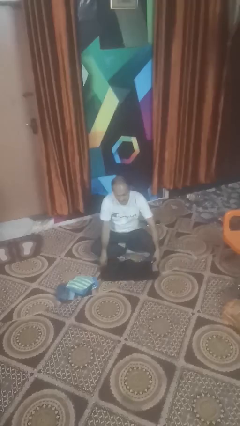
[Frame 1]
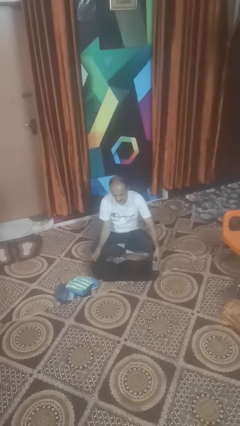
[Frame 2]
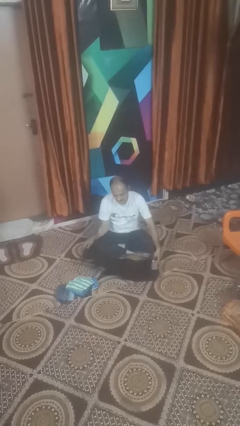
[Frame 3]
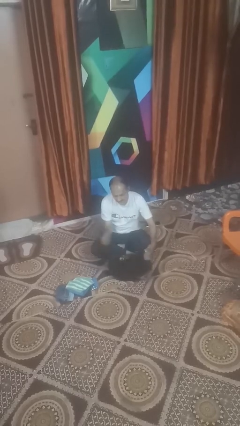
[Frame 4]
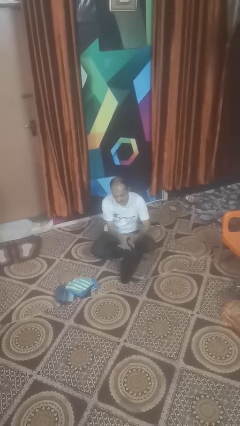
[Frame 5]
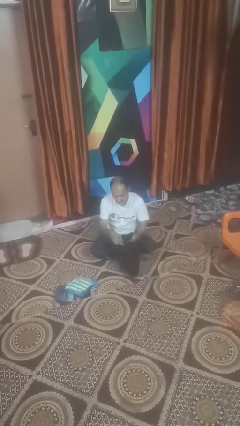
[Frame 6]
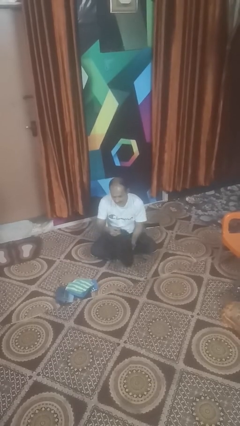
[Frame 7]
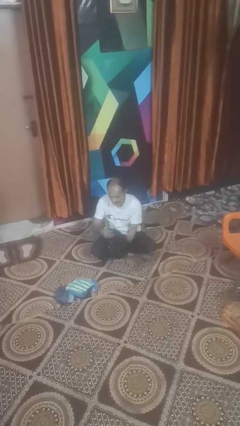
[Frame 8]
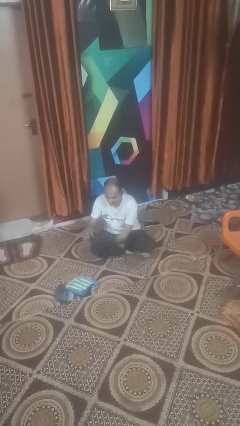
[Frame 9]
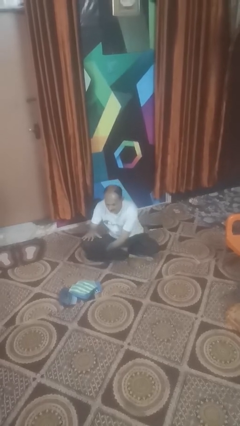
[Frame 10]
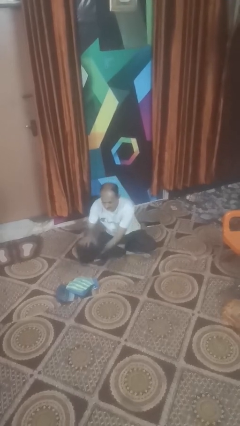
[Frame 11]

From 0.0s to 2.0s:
person folds pants

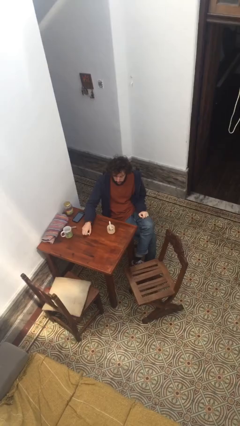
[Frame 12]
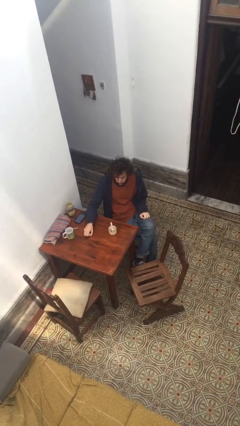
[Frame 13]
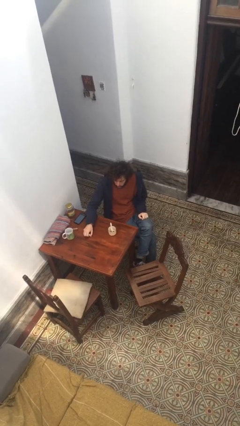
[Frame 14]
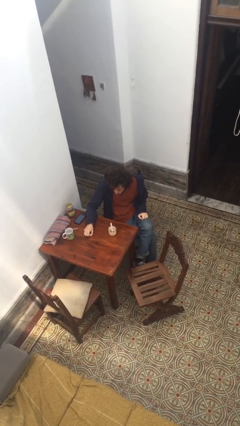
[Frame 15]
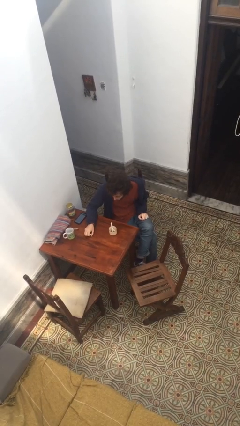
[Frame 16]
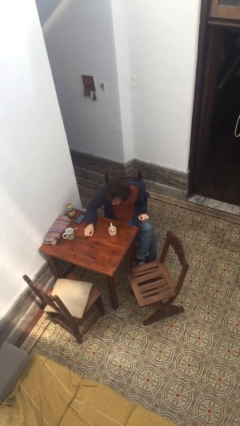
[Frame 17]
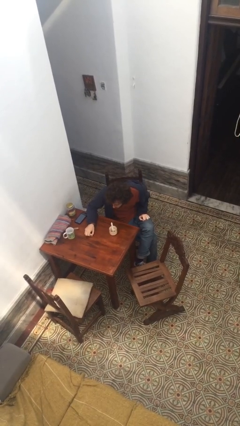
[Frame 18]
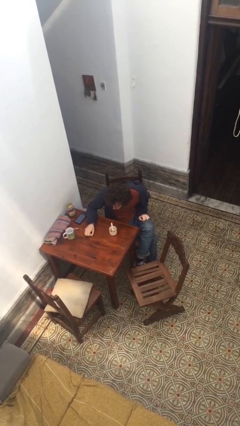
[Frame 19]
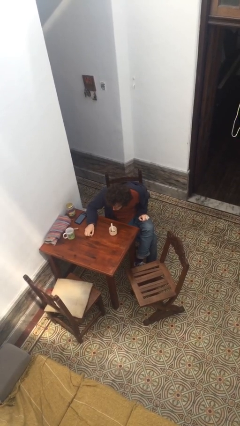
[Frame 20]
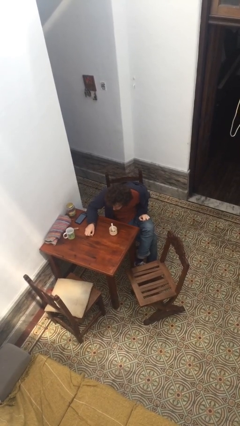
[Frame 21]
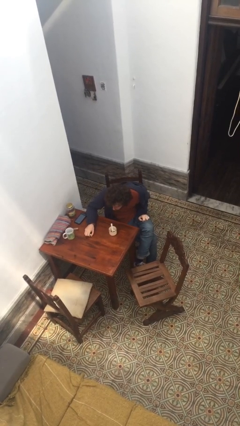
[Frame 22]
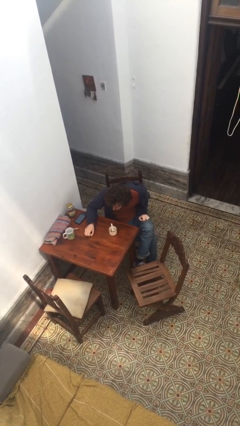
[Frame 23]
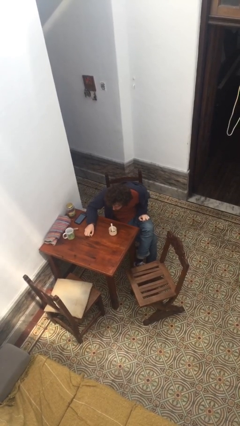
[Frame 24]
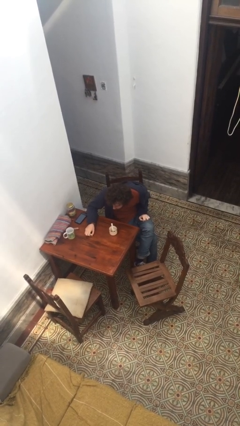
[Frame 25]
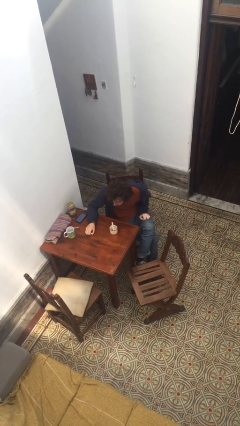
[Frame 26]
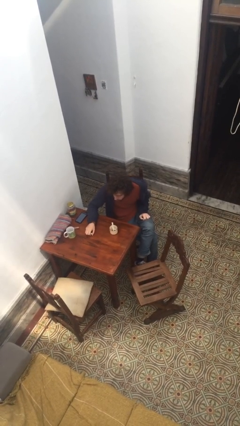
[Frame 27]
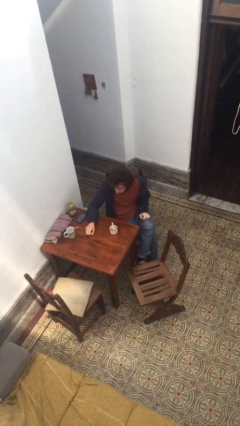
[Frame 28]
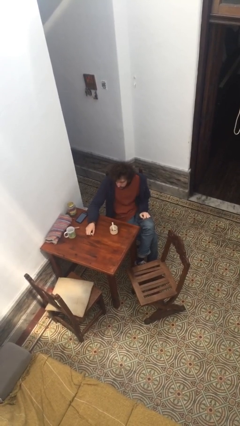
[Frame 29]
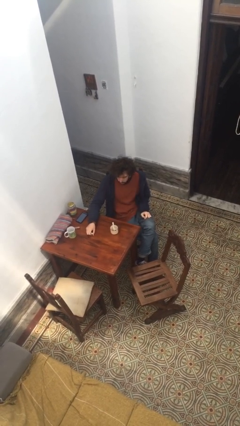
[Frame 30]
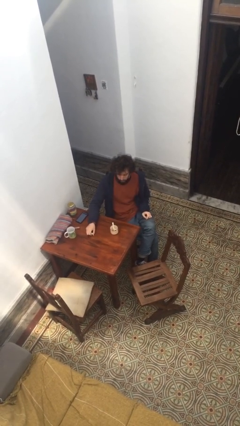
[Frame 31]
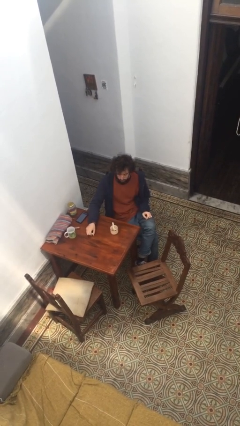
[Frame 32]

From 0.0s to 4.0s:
person extinguishes candle

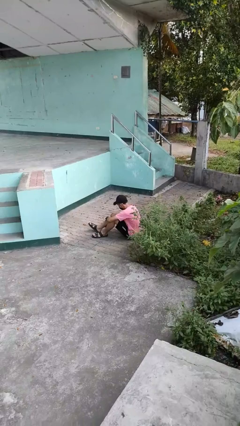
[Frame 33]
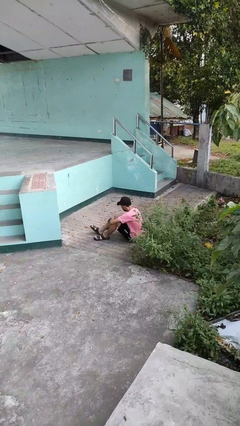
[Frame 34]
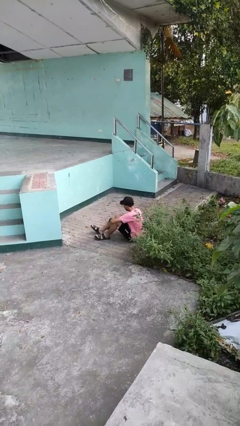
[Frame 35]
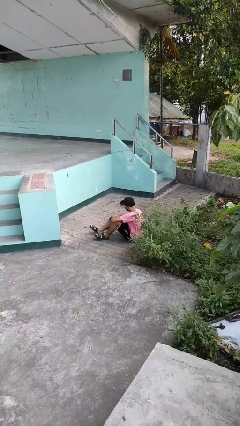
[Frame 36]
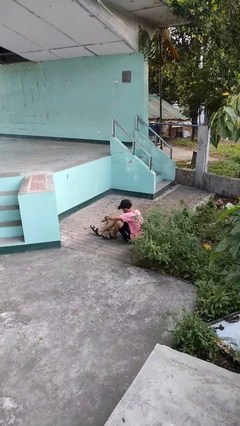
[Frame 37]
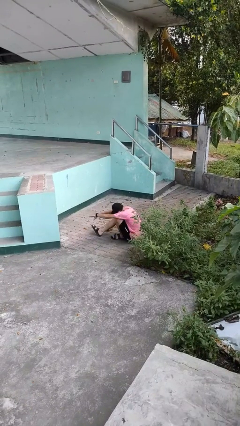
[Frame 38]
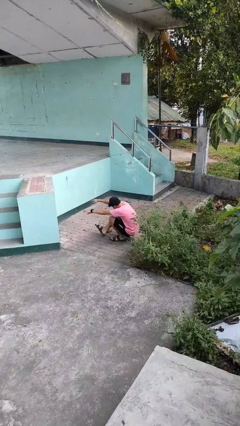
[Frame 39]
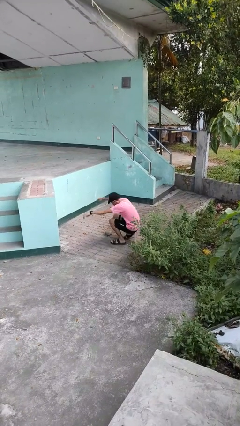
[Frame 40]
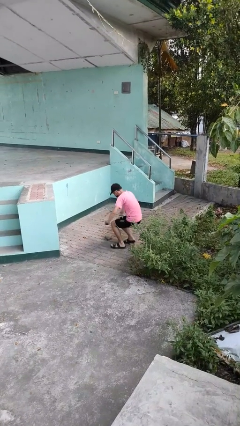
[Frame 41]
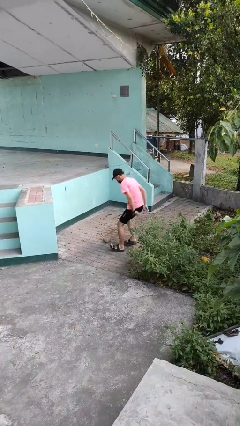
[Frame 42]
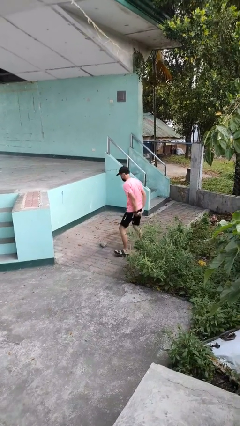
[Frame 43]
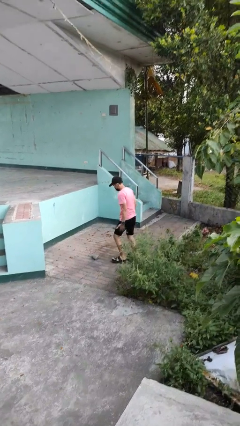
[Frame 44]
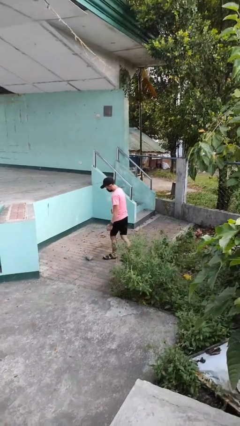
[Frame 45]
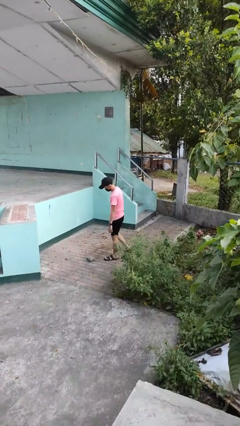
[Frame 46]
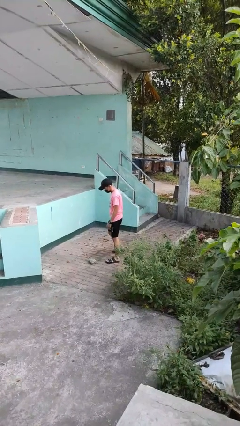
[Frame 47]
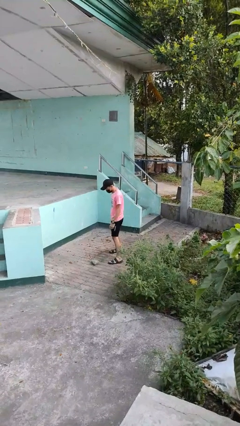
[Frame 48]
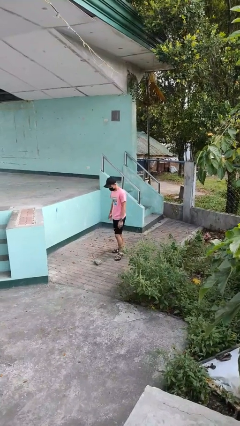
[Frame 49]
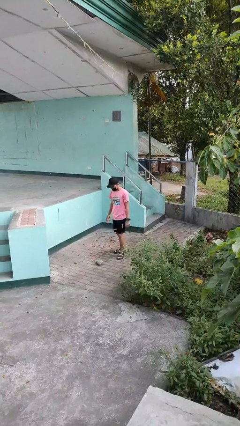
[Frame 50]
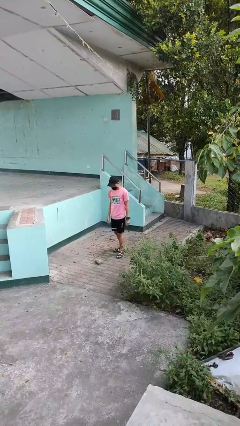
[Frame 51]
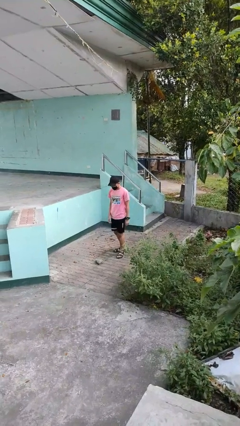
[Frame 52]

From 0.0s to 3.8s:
person stands up from floor

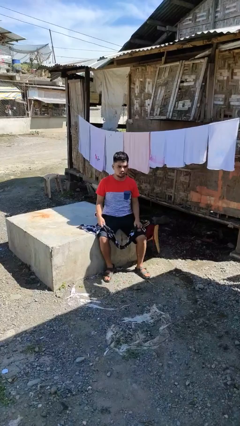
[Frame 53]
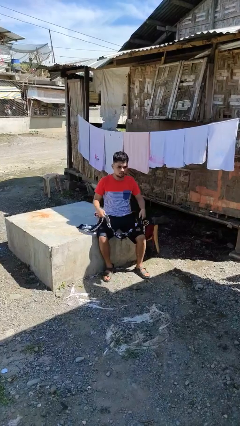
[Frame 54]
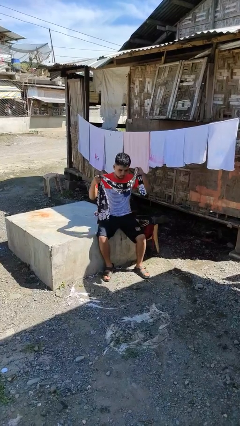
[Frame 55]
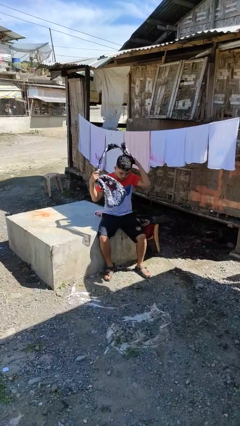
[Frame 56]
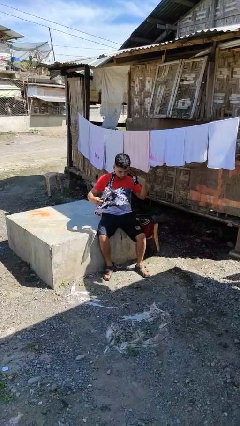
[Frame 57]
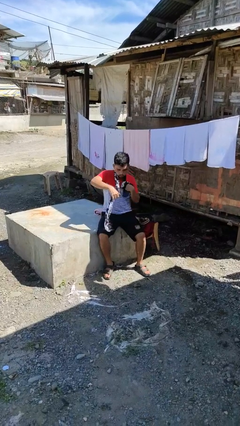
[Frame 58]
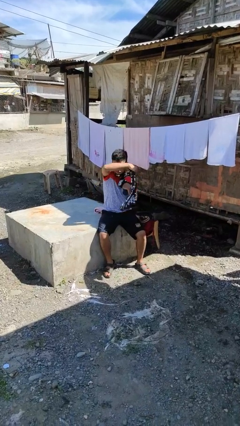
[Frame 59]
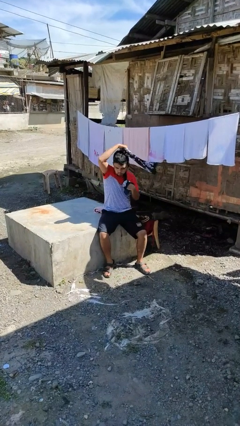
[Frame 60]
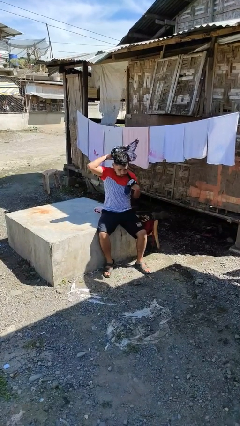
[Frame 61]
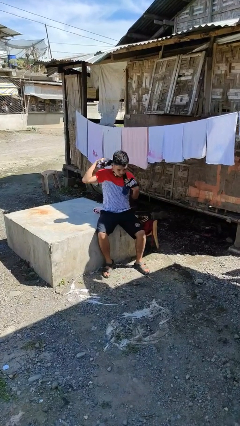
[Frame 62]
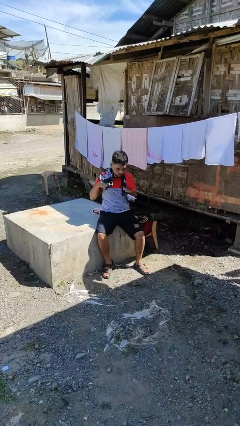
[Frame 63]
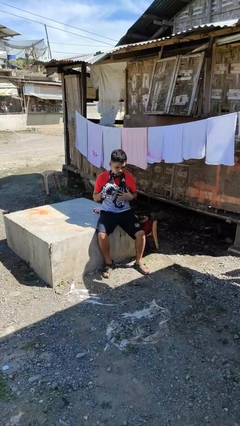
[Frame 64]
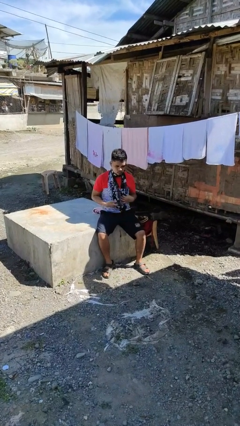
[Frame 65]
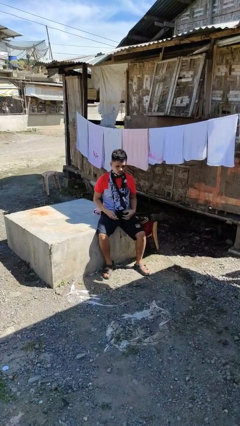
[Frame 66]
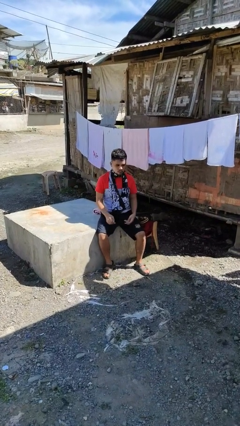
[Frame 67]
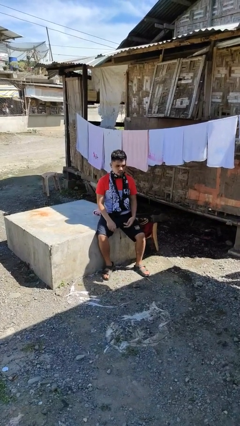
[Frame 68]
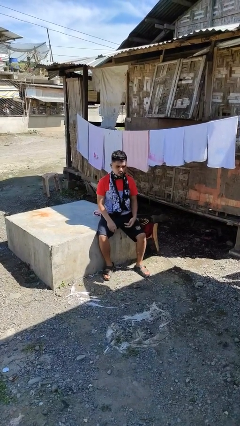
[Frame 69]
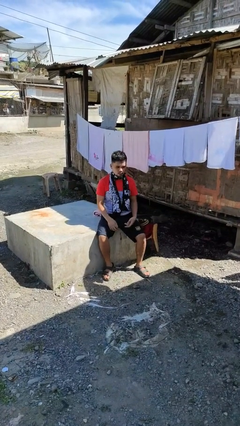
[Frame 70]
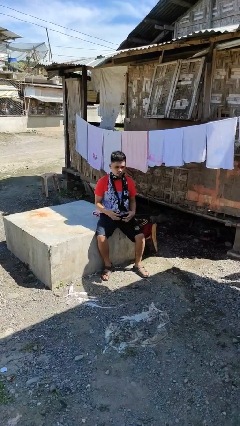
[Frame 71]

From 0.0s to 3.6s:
person puts on scarf

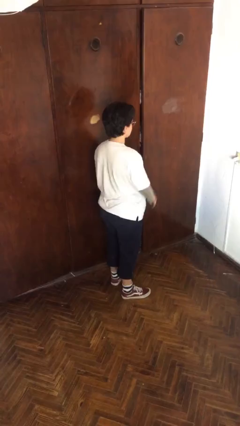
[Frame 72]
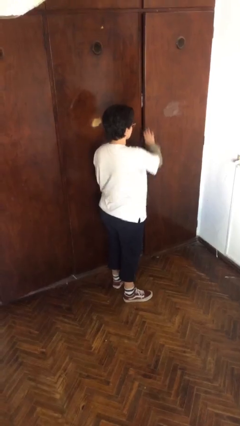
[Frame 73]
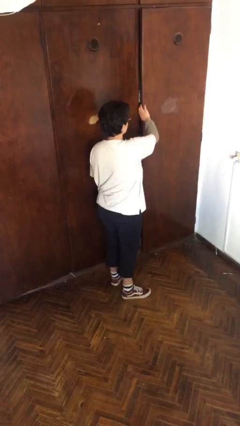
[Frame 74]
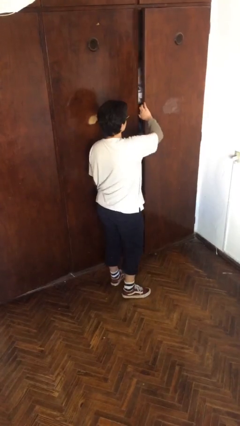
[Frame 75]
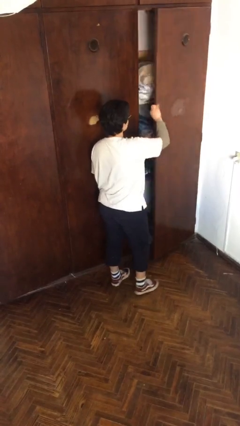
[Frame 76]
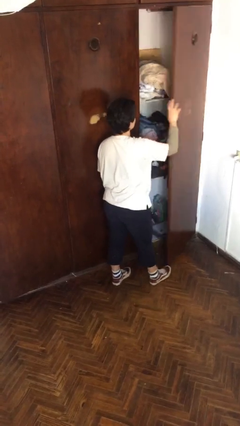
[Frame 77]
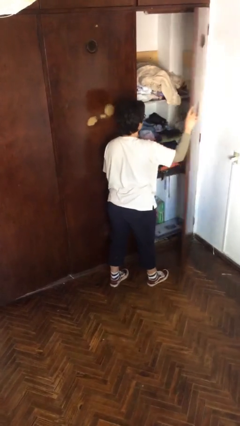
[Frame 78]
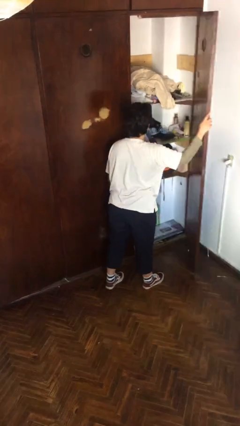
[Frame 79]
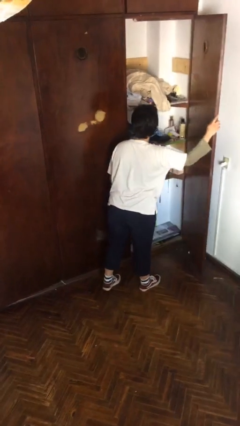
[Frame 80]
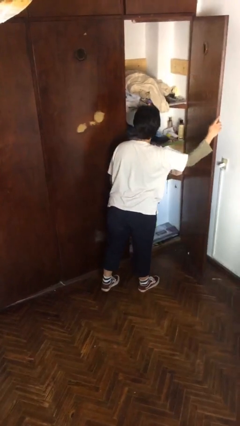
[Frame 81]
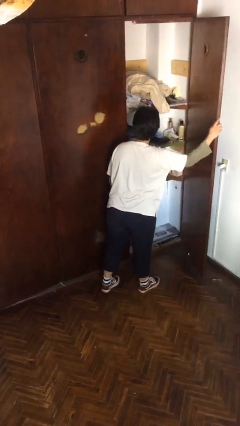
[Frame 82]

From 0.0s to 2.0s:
person opens closet door

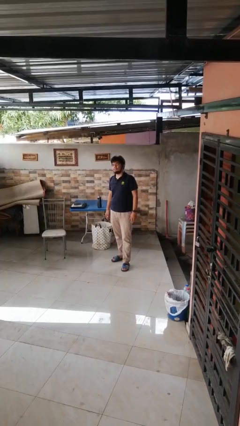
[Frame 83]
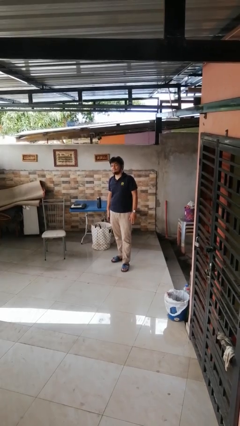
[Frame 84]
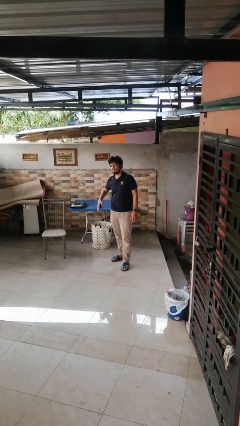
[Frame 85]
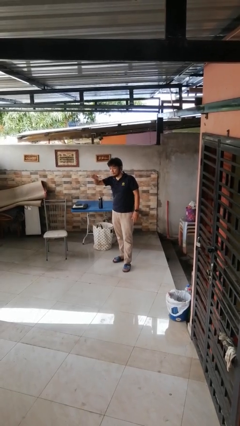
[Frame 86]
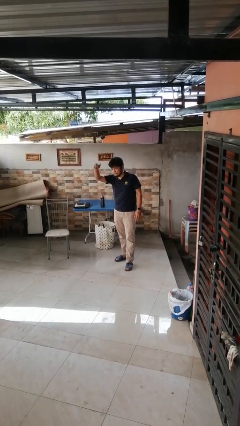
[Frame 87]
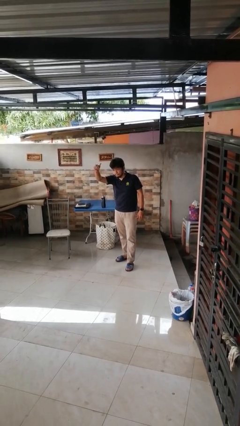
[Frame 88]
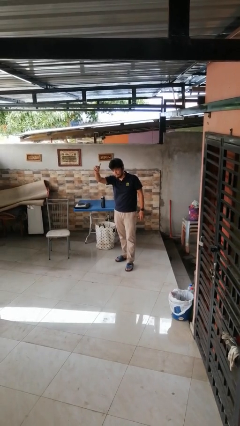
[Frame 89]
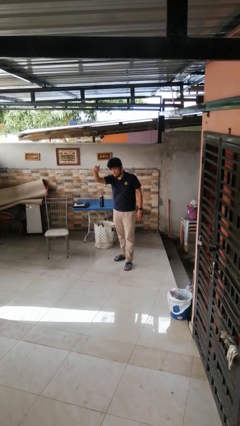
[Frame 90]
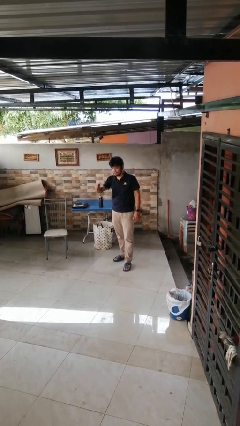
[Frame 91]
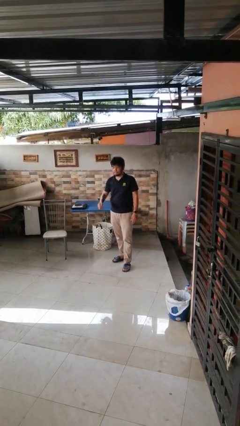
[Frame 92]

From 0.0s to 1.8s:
person gestures come here

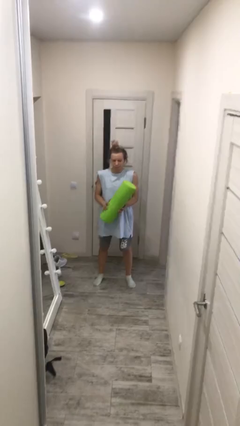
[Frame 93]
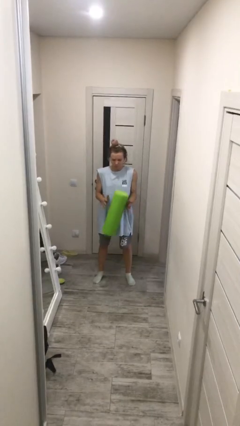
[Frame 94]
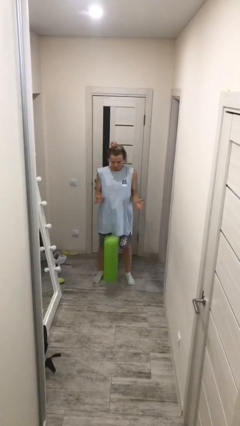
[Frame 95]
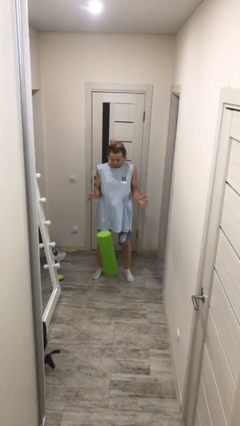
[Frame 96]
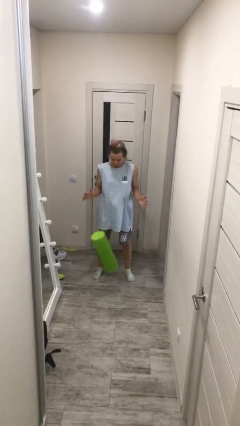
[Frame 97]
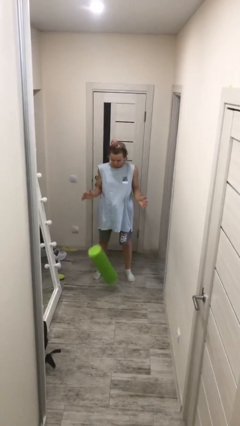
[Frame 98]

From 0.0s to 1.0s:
person drops object
